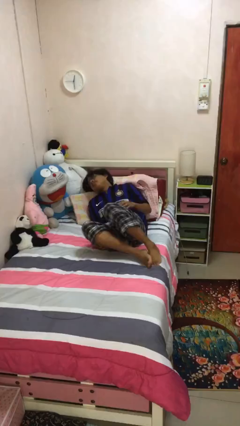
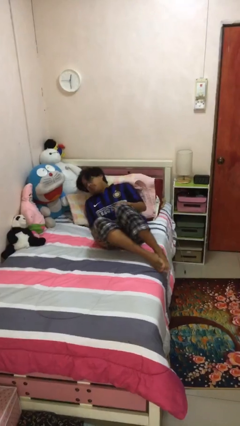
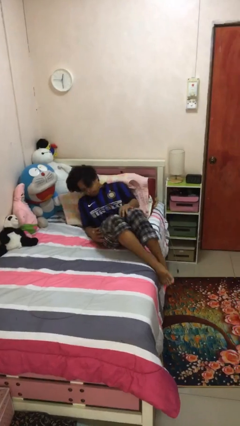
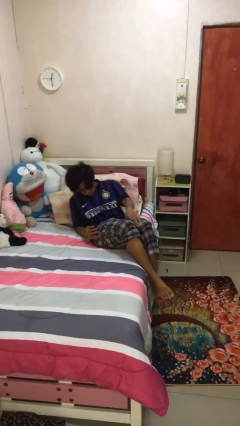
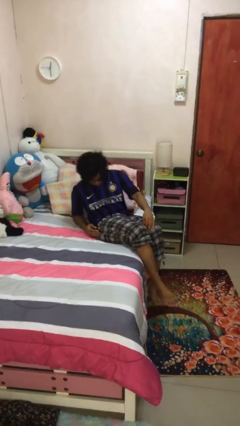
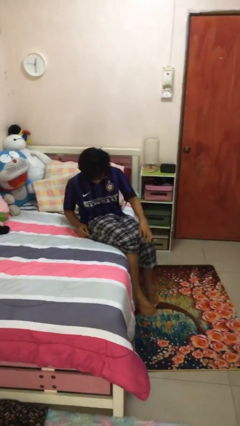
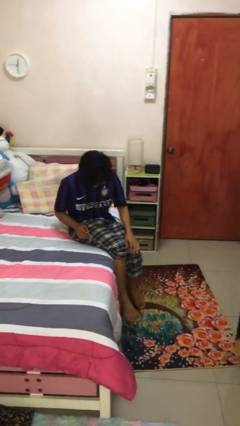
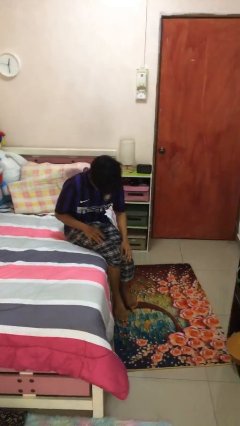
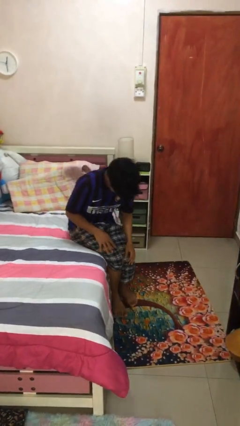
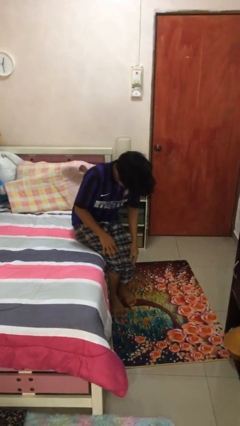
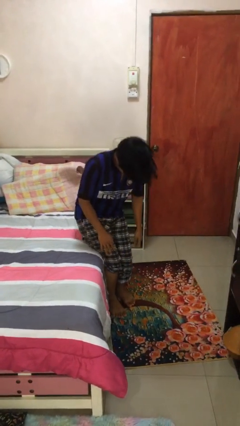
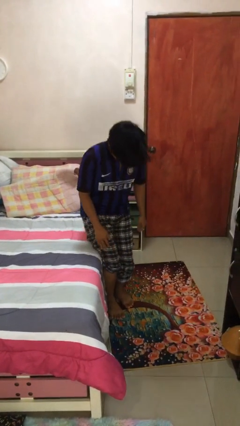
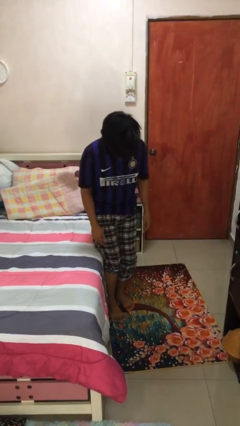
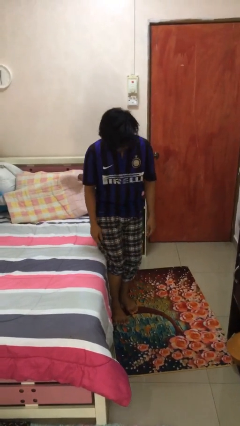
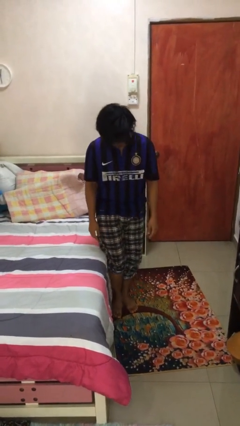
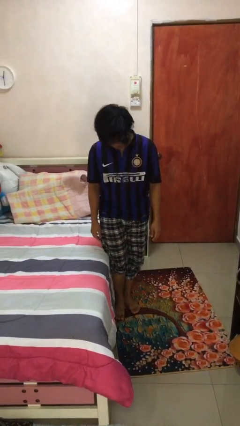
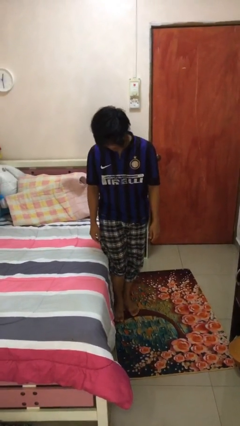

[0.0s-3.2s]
person stands up

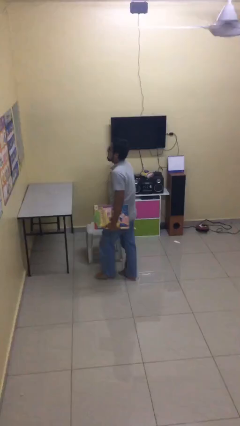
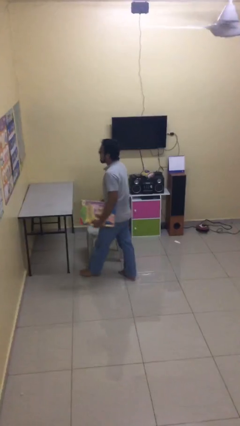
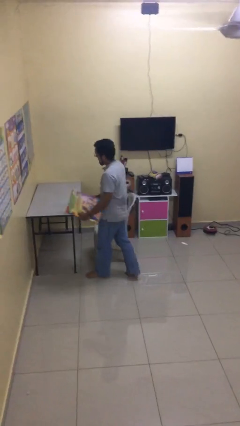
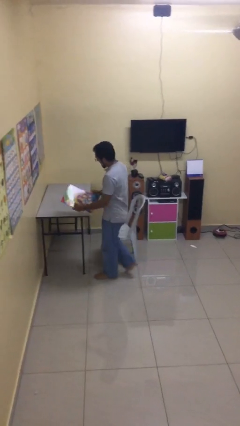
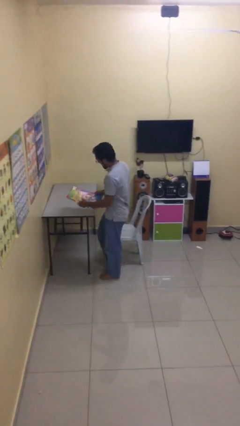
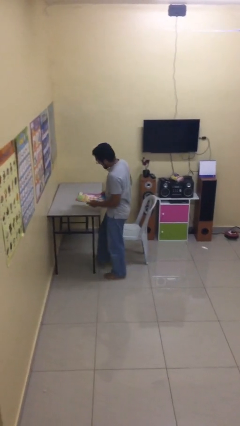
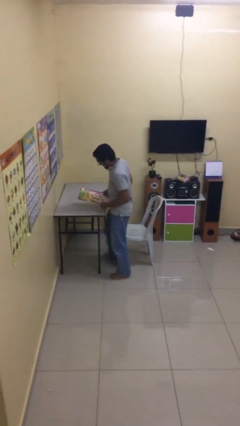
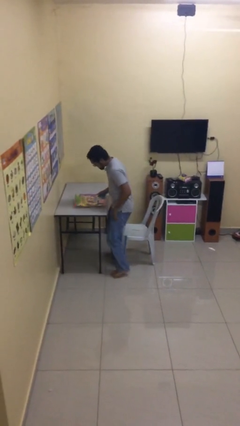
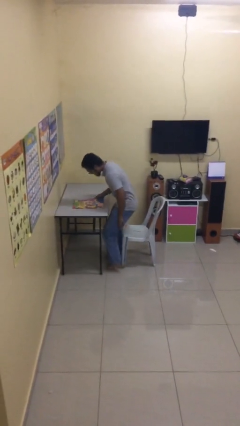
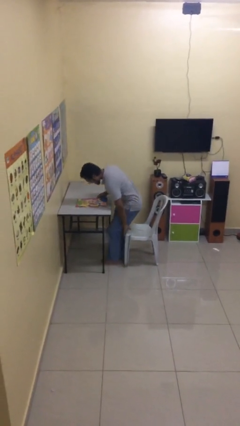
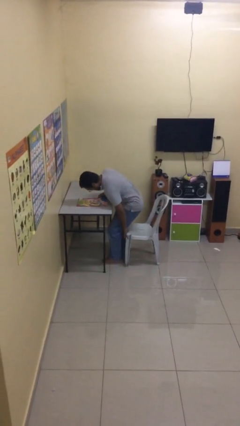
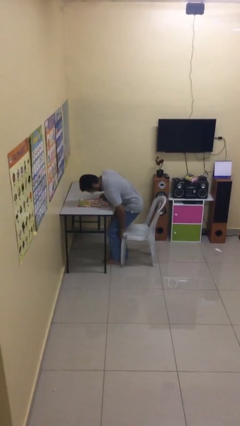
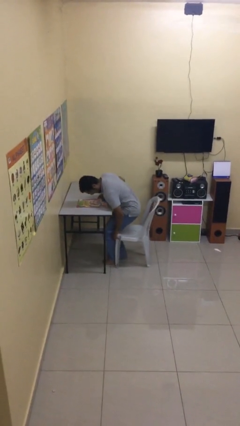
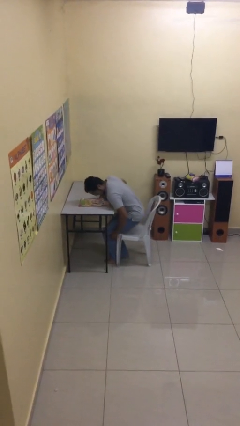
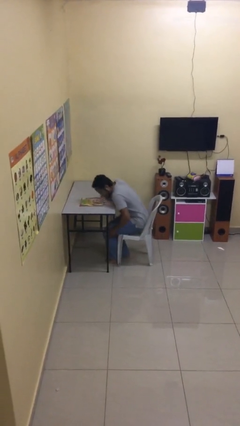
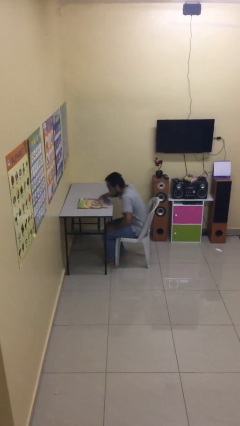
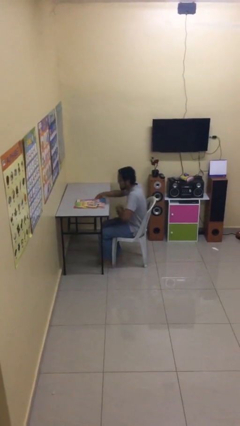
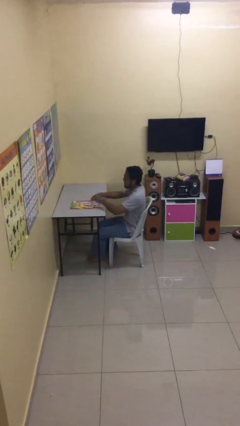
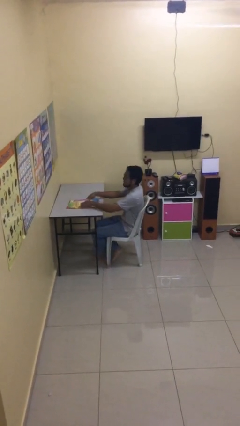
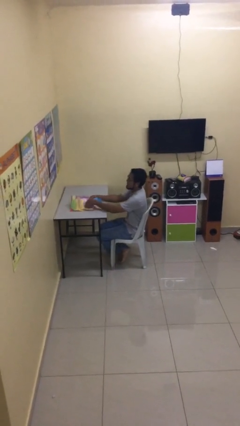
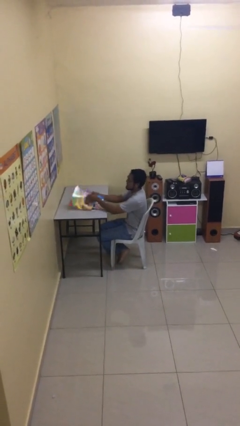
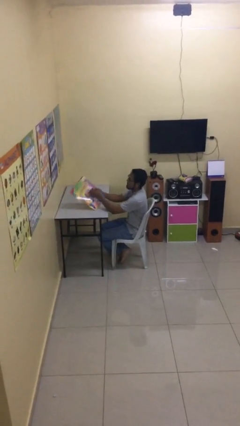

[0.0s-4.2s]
person sits down

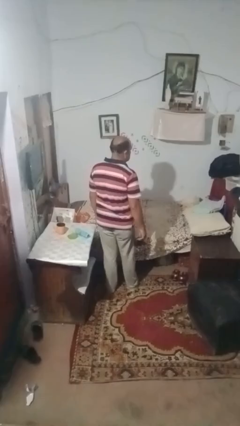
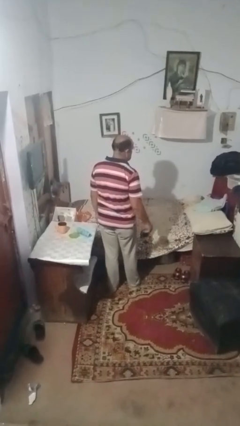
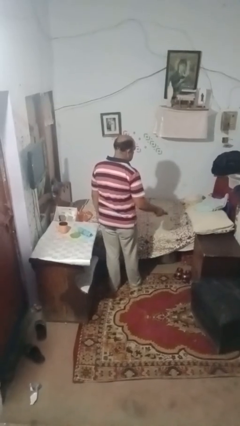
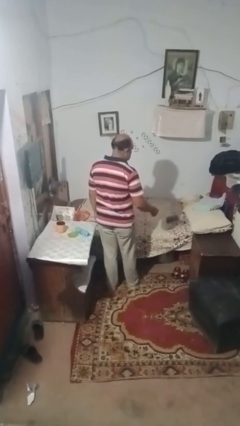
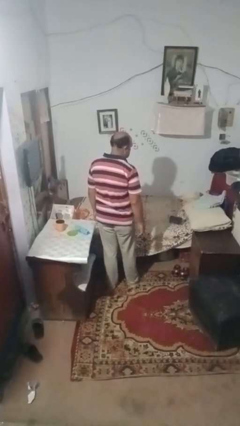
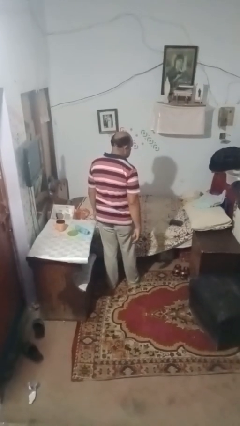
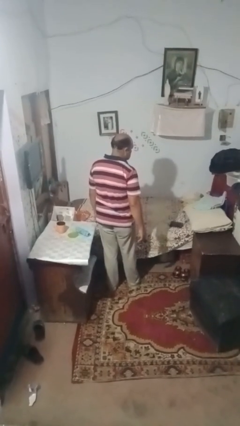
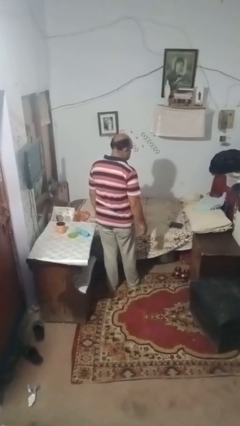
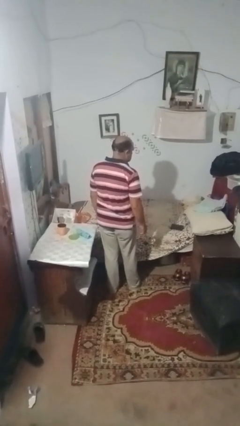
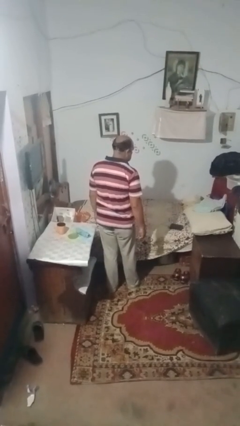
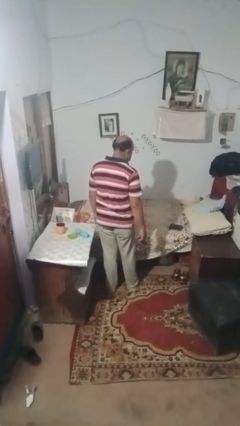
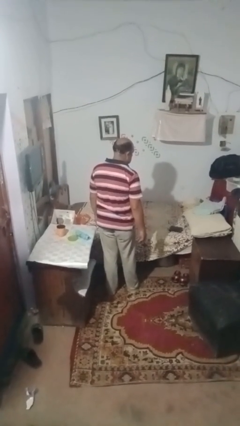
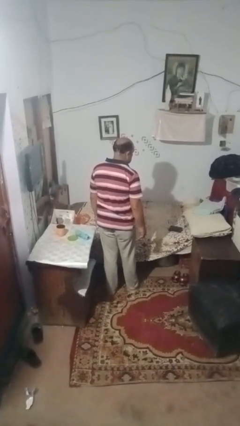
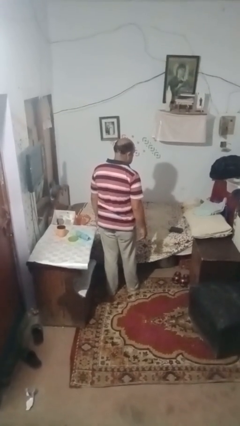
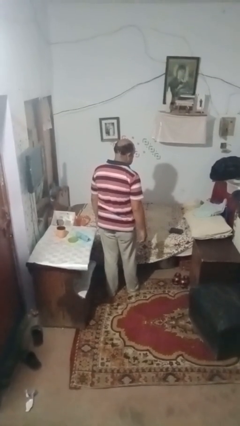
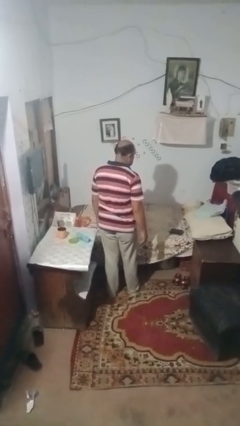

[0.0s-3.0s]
person throws object on bed

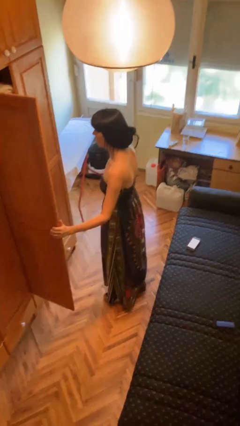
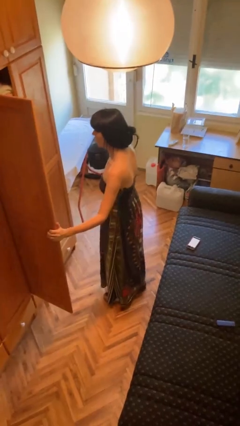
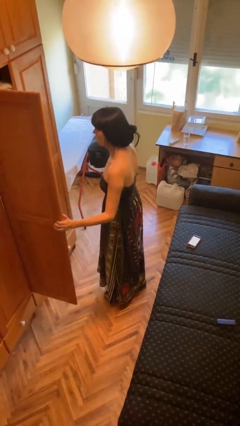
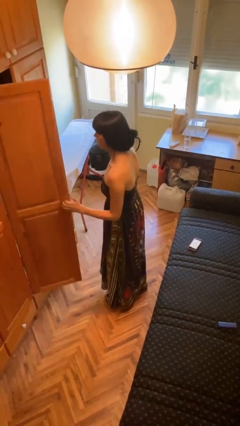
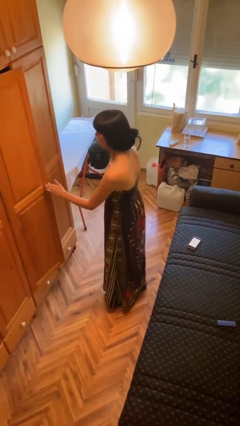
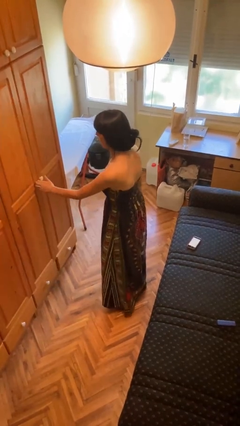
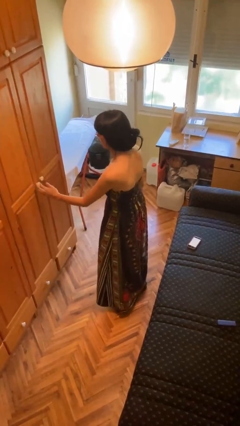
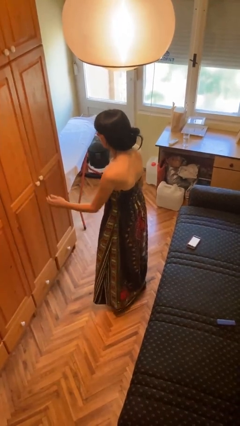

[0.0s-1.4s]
person closes closet door

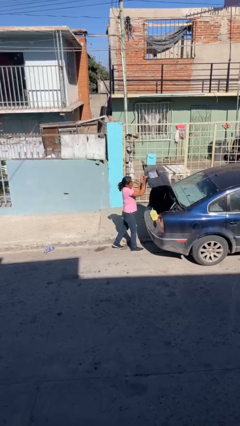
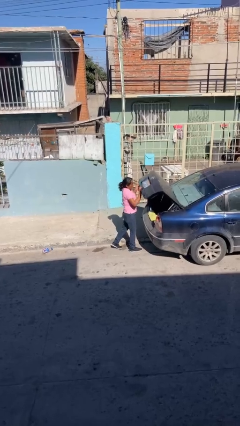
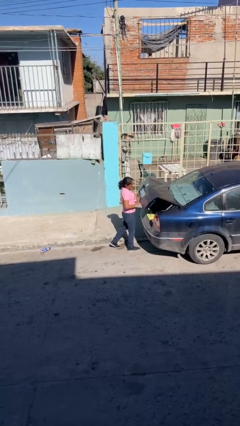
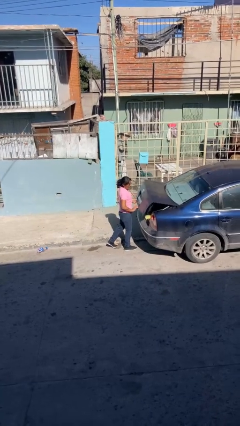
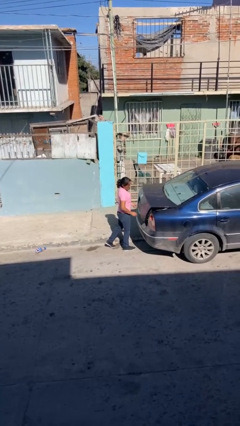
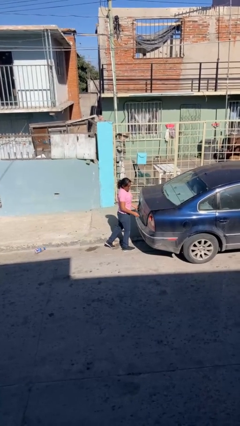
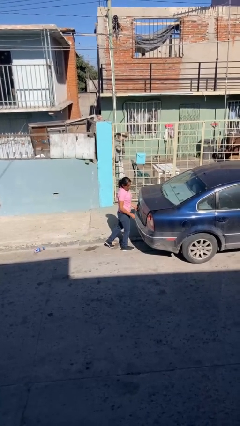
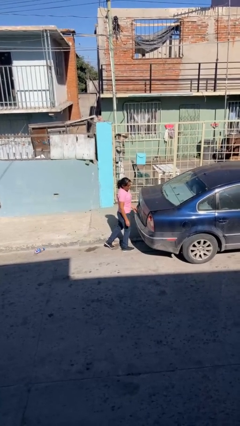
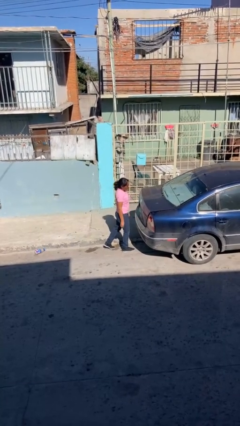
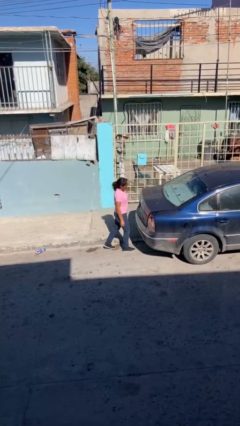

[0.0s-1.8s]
person closes car trunk

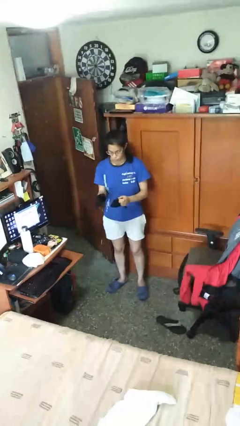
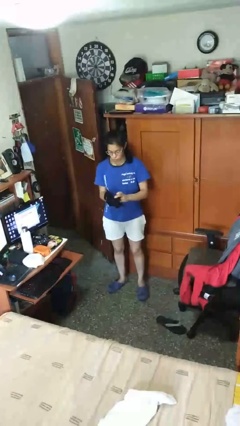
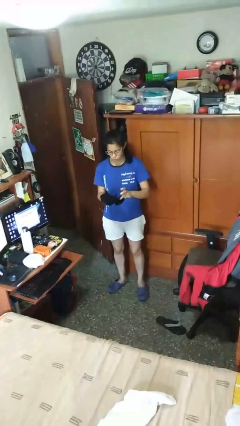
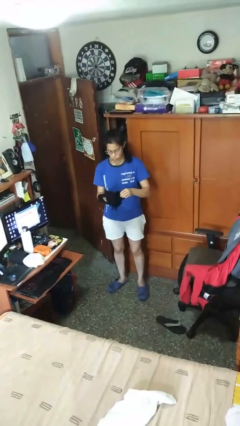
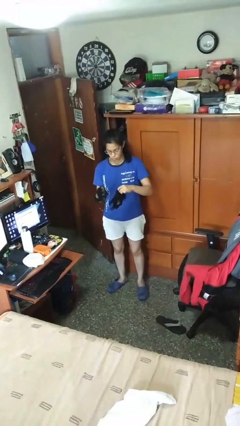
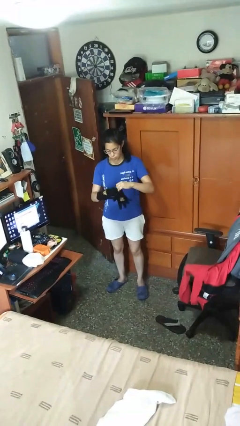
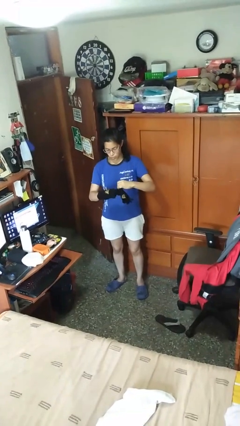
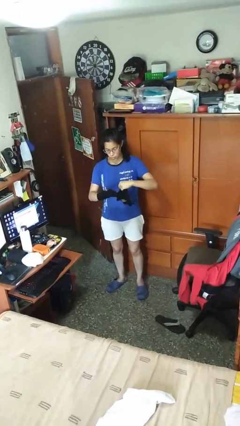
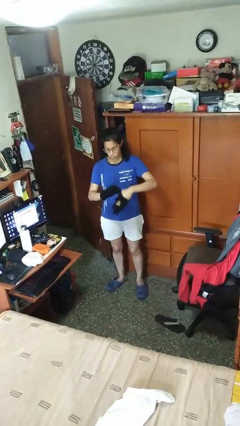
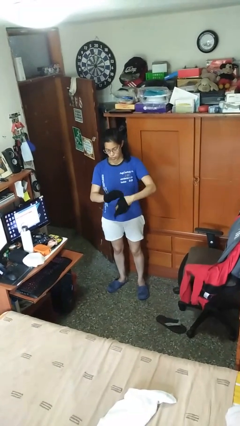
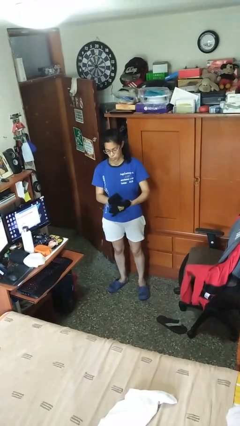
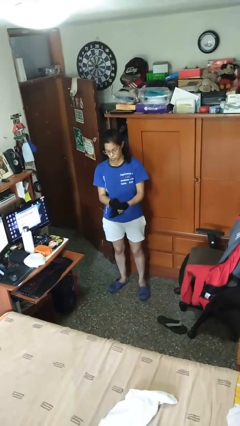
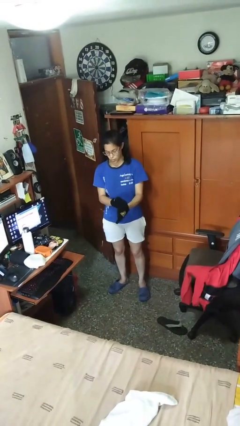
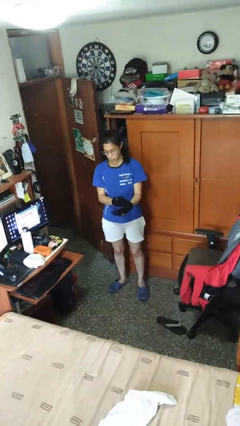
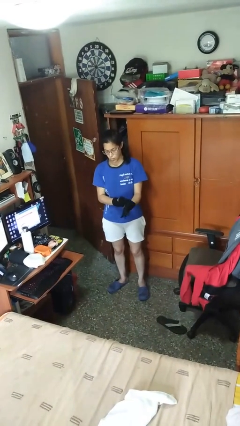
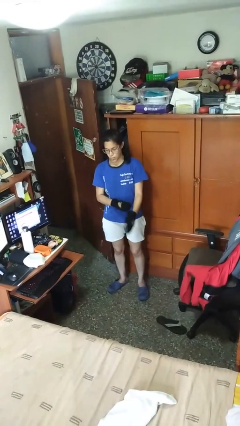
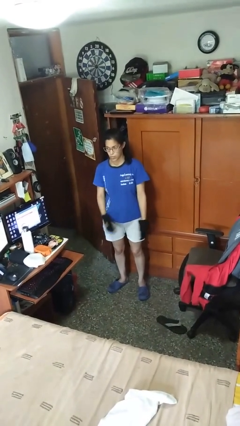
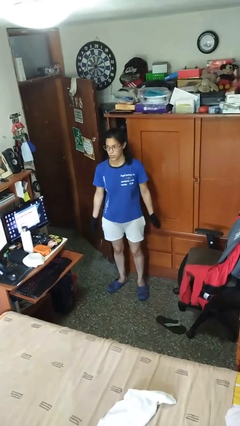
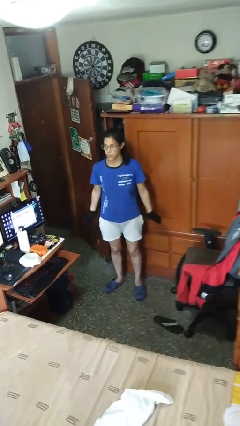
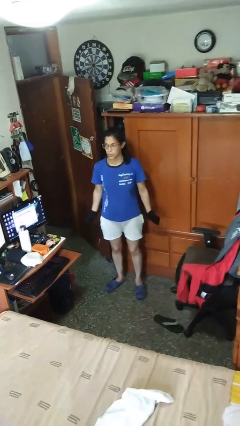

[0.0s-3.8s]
person puts on gloves
